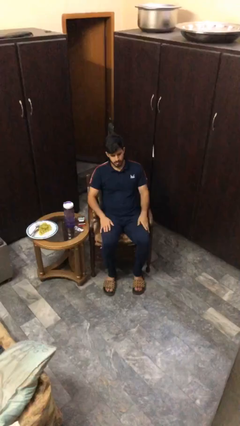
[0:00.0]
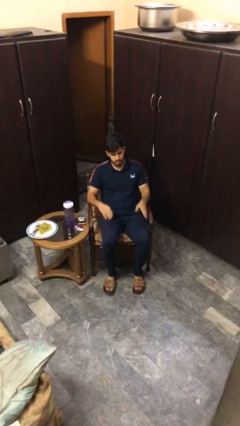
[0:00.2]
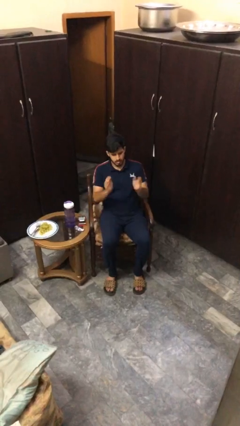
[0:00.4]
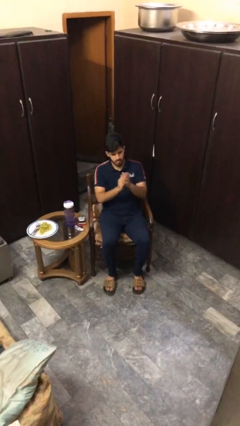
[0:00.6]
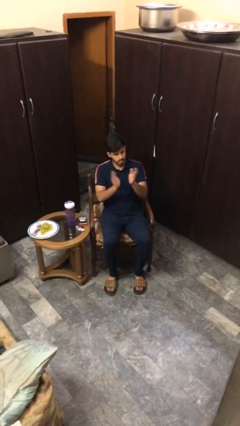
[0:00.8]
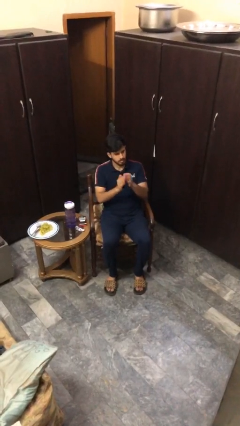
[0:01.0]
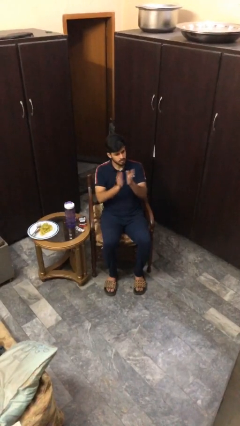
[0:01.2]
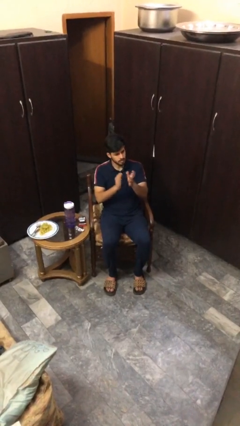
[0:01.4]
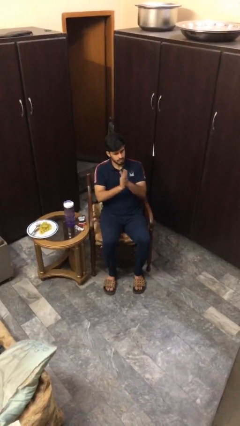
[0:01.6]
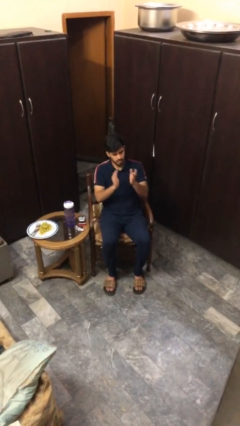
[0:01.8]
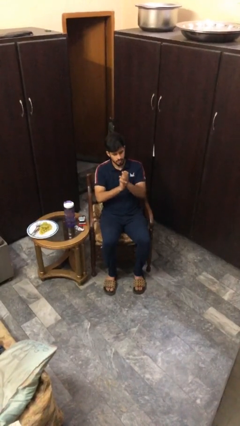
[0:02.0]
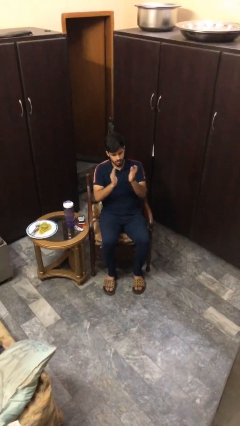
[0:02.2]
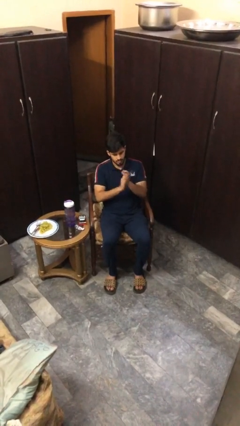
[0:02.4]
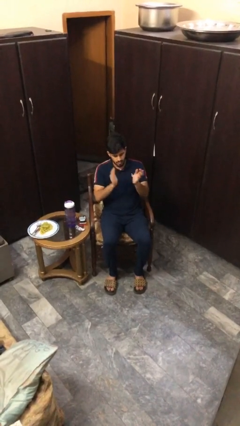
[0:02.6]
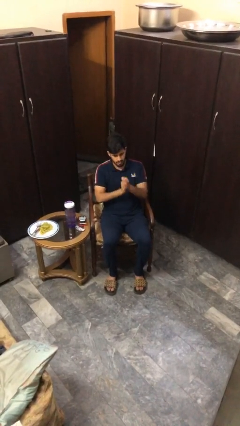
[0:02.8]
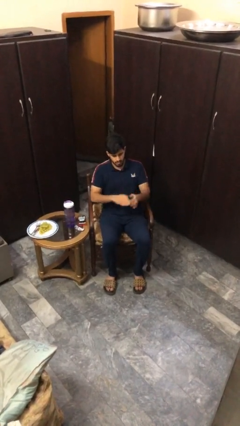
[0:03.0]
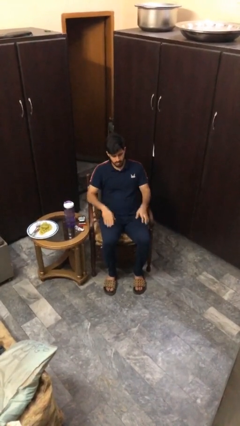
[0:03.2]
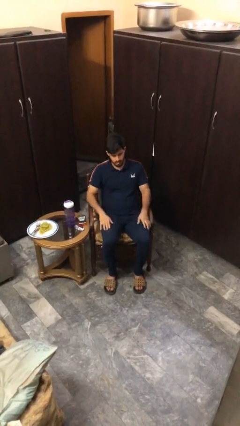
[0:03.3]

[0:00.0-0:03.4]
person claps hands

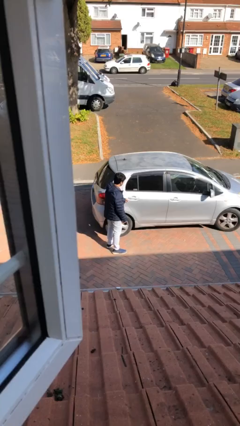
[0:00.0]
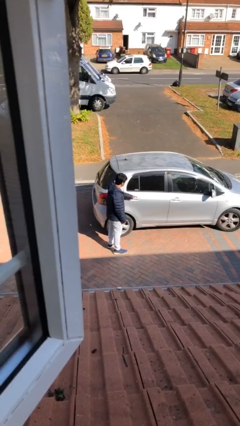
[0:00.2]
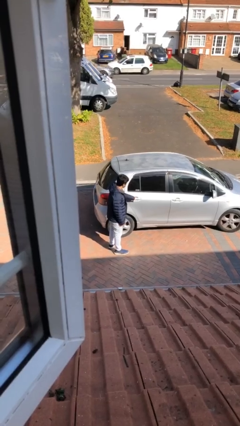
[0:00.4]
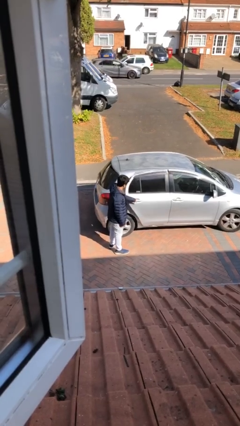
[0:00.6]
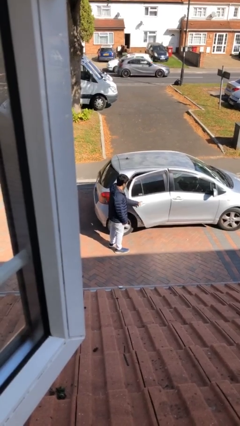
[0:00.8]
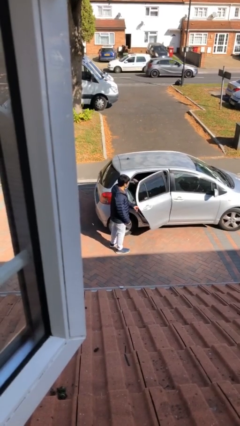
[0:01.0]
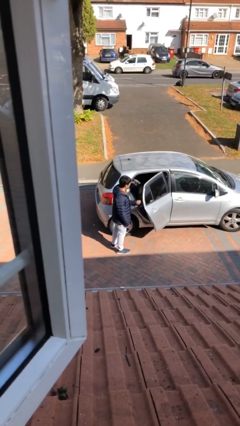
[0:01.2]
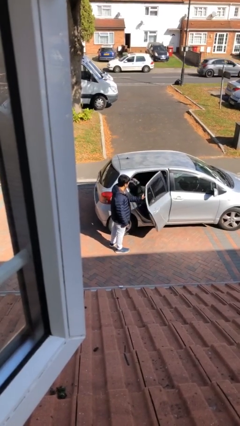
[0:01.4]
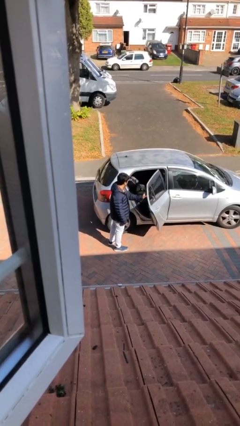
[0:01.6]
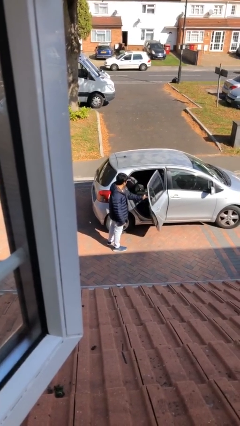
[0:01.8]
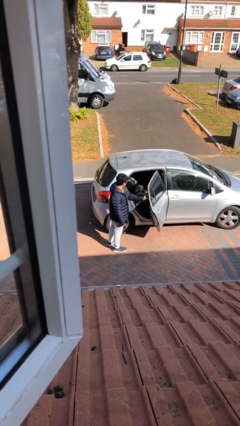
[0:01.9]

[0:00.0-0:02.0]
person opens car door

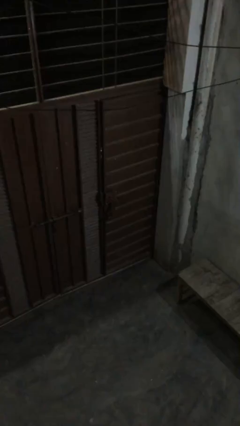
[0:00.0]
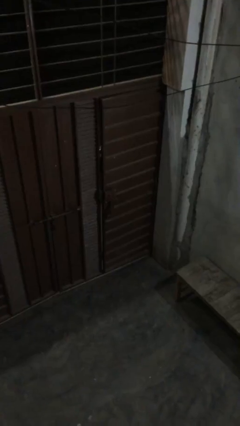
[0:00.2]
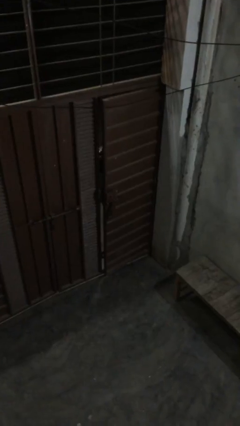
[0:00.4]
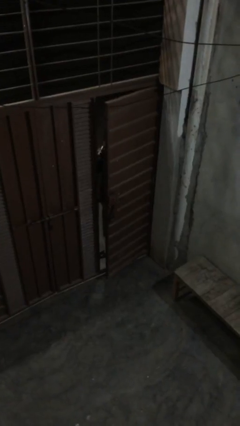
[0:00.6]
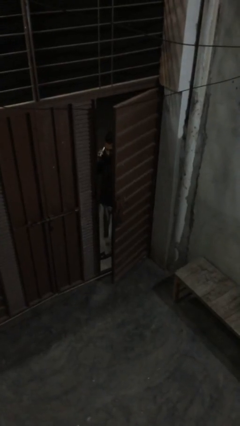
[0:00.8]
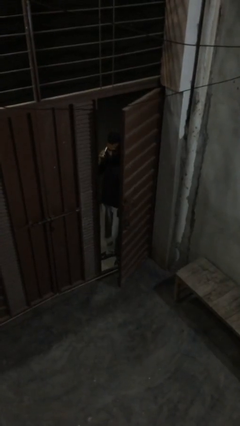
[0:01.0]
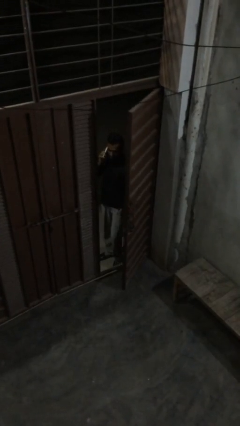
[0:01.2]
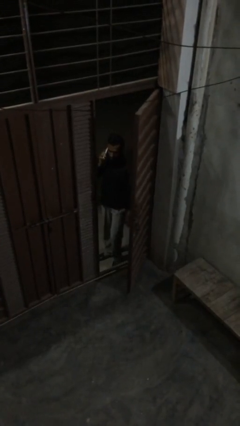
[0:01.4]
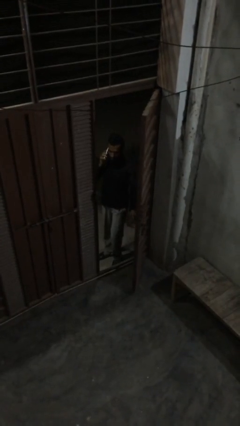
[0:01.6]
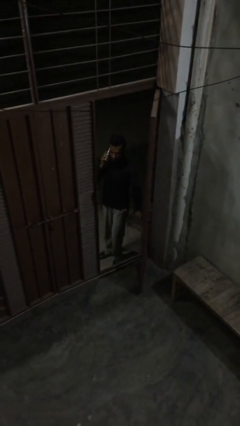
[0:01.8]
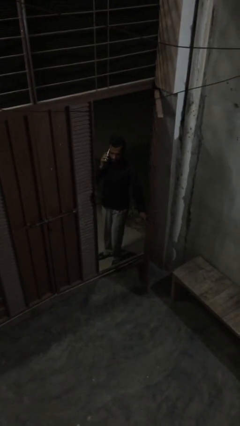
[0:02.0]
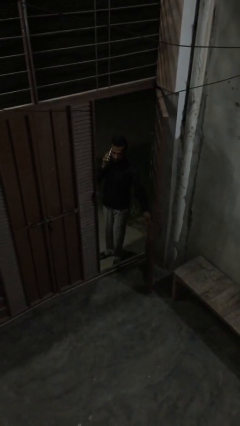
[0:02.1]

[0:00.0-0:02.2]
person opens facility door

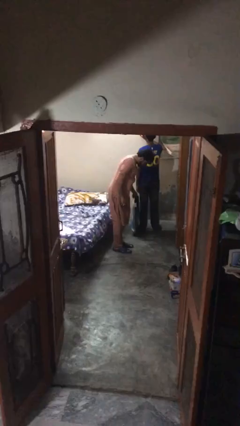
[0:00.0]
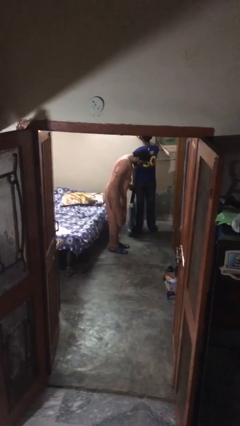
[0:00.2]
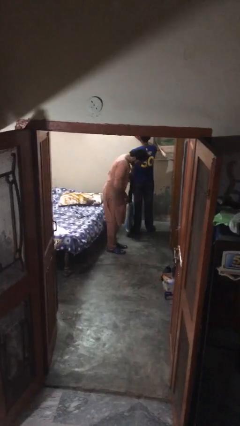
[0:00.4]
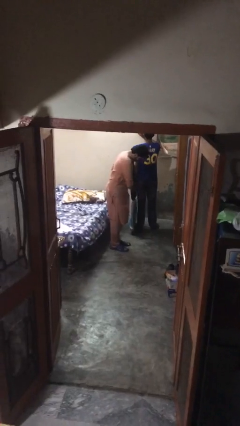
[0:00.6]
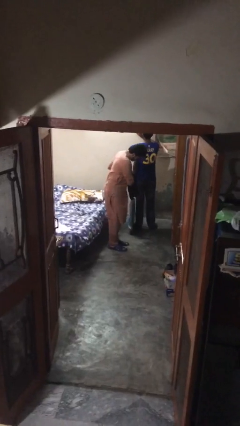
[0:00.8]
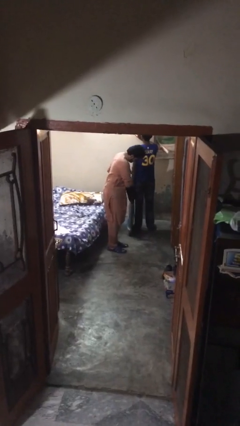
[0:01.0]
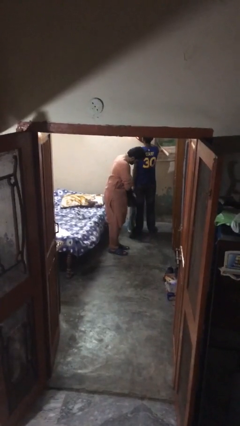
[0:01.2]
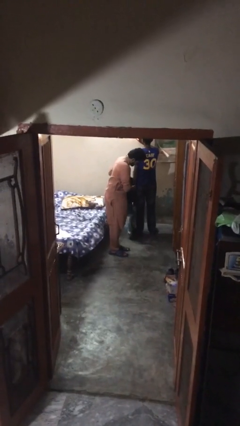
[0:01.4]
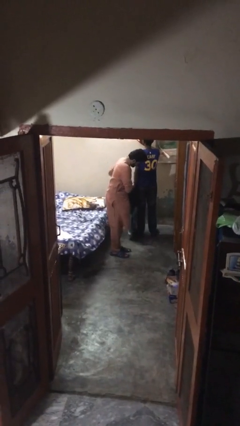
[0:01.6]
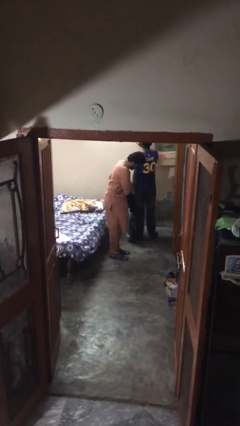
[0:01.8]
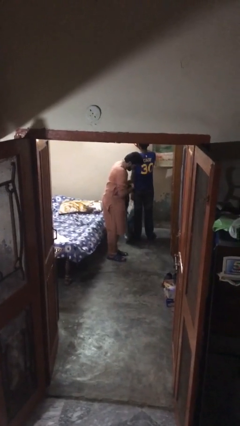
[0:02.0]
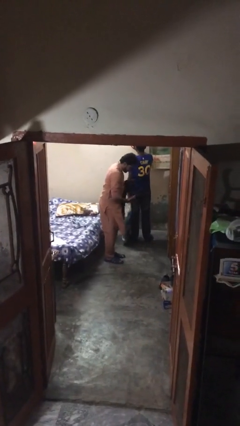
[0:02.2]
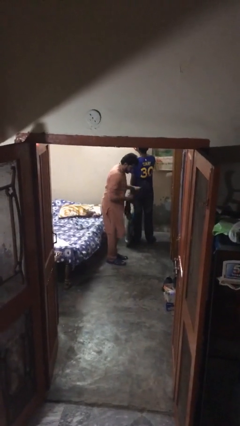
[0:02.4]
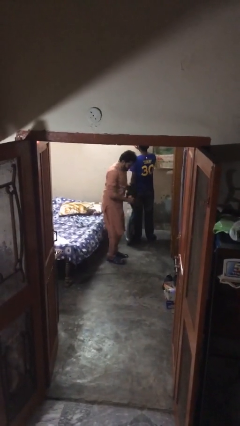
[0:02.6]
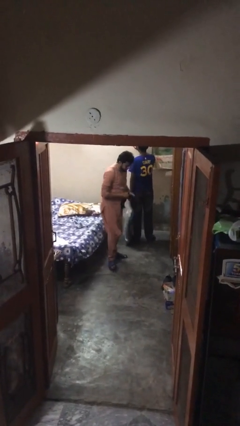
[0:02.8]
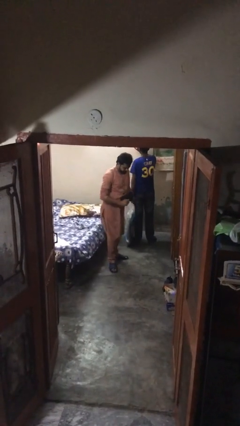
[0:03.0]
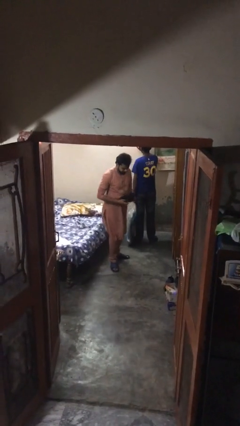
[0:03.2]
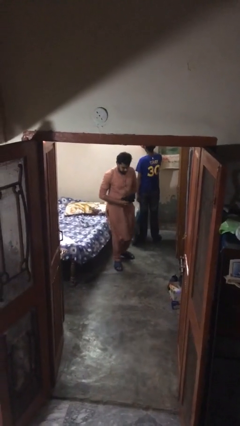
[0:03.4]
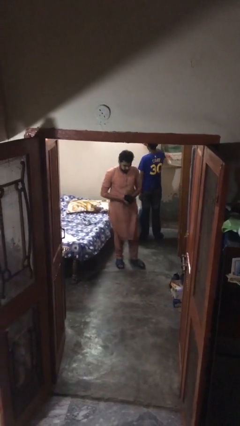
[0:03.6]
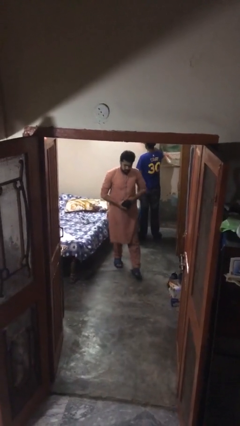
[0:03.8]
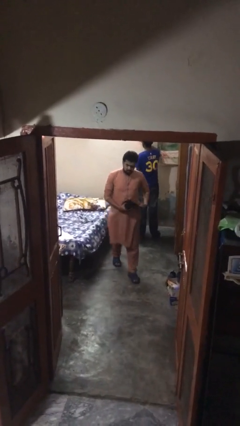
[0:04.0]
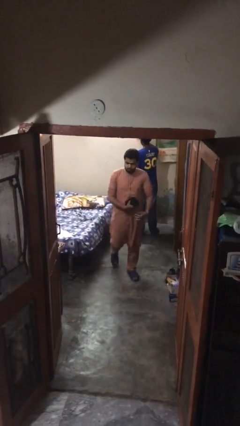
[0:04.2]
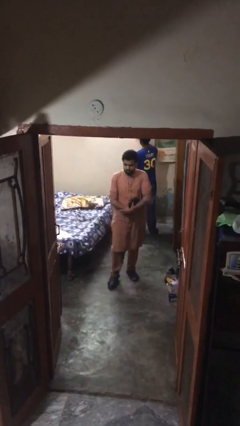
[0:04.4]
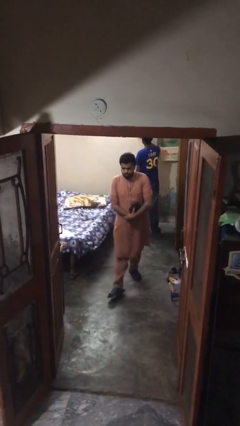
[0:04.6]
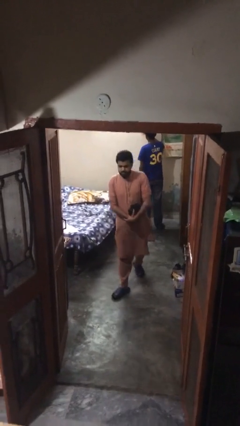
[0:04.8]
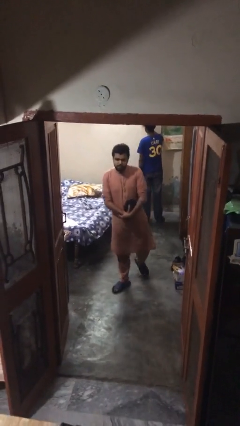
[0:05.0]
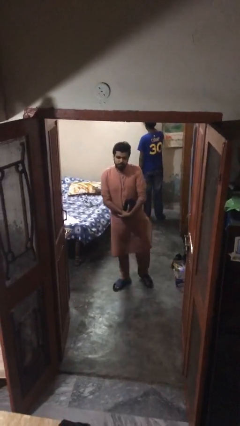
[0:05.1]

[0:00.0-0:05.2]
person steals object from person

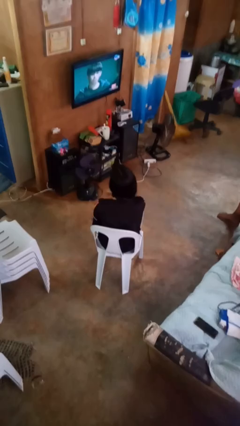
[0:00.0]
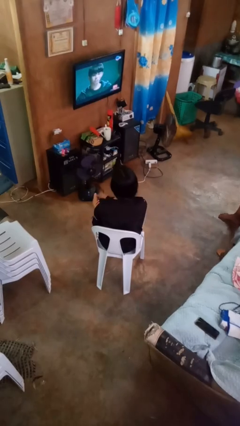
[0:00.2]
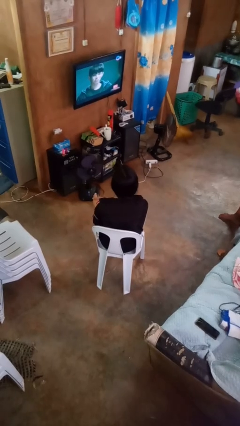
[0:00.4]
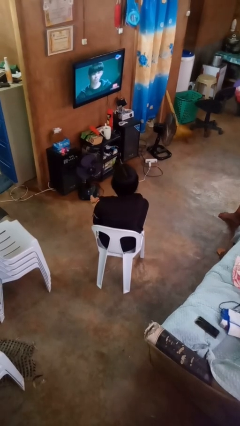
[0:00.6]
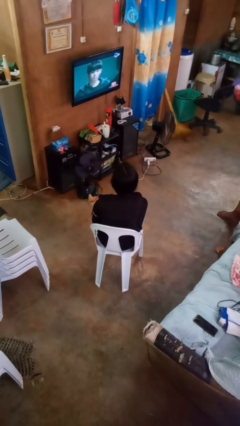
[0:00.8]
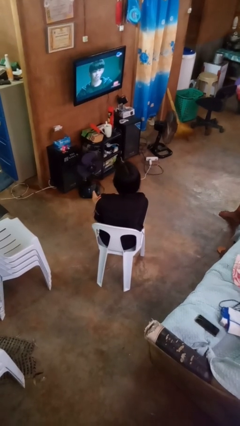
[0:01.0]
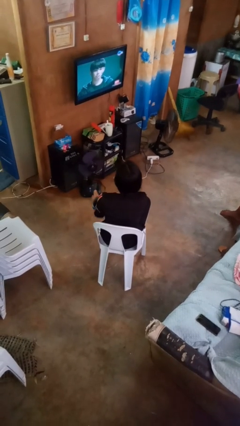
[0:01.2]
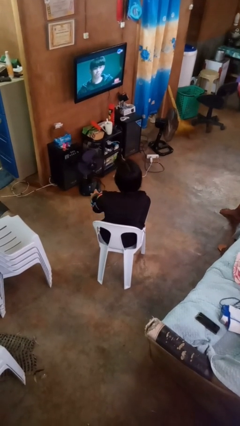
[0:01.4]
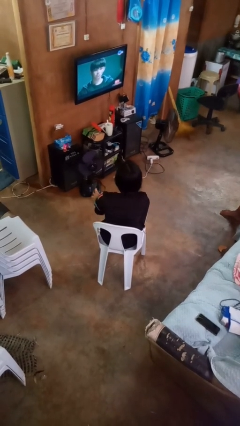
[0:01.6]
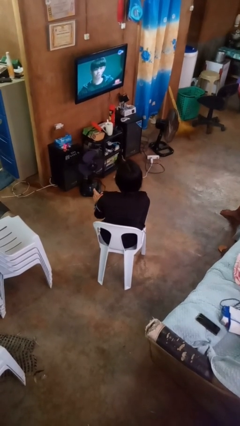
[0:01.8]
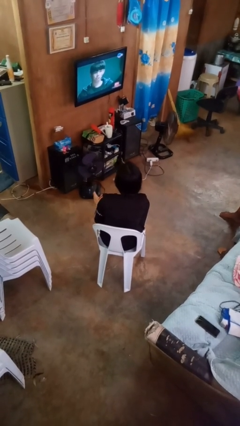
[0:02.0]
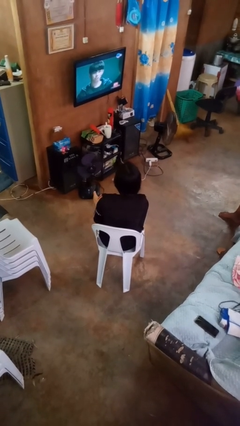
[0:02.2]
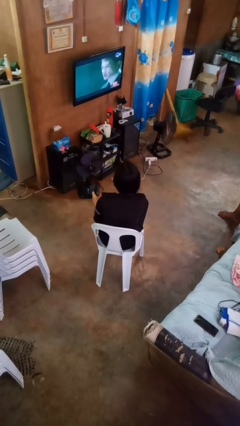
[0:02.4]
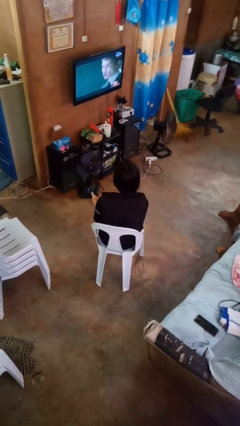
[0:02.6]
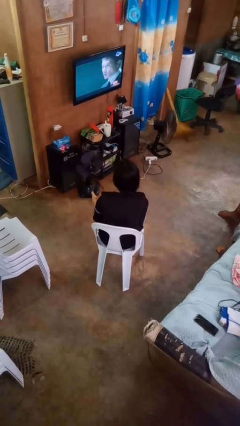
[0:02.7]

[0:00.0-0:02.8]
person rubs foot

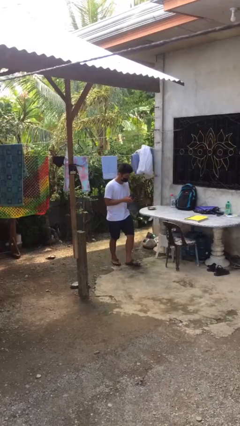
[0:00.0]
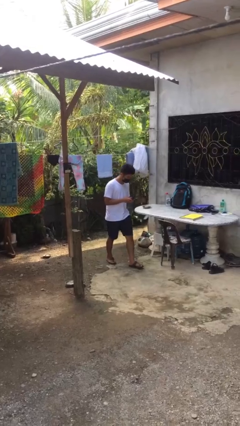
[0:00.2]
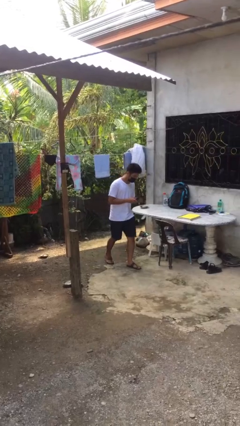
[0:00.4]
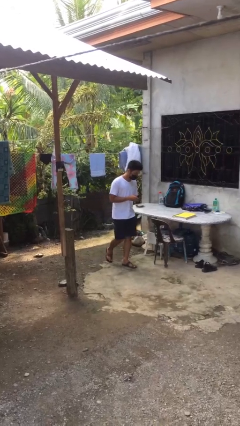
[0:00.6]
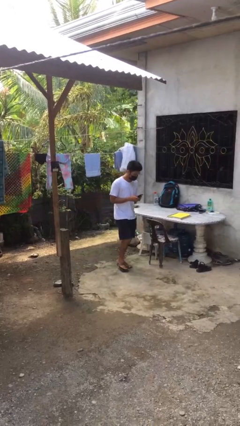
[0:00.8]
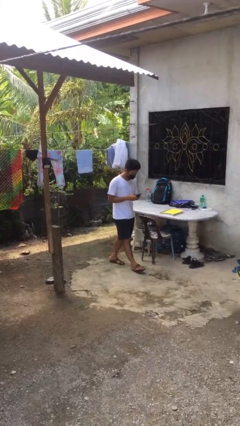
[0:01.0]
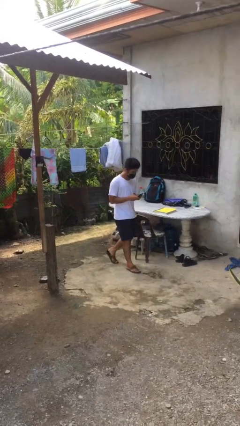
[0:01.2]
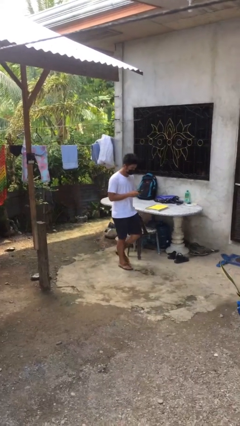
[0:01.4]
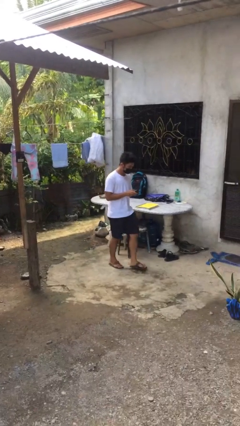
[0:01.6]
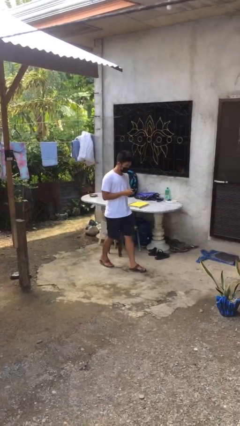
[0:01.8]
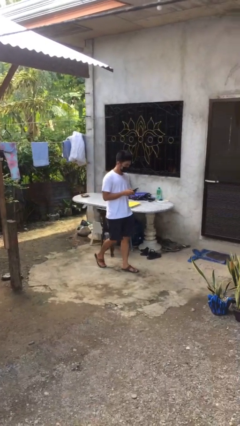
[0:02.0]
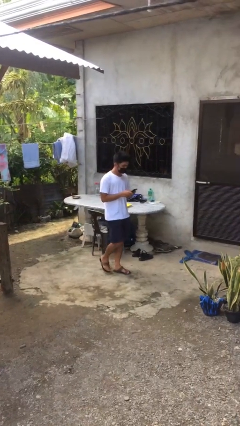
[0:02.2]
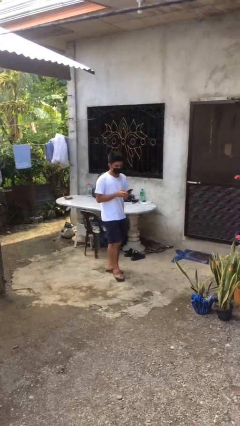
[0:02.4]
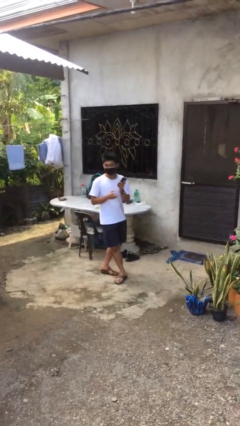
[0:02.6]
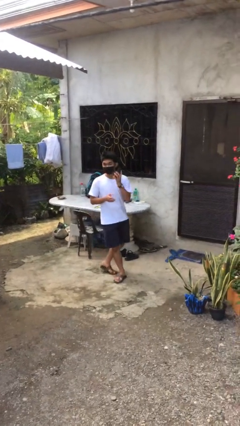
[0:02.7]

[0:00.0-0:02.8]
person texts on phone
